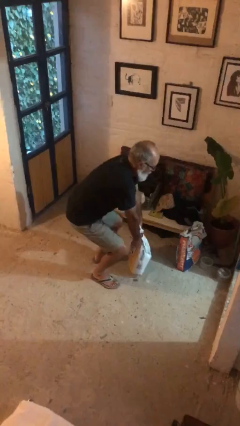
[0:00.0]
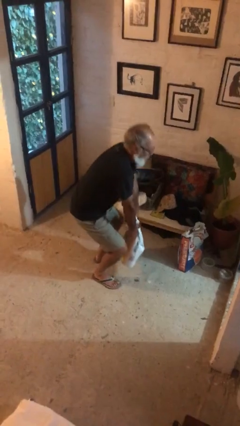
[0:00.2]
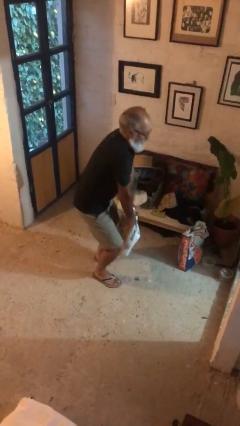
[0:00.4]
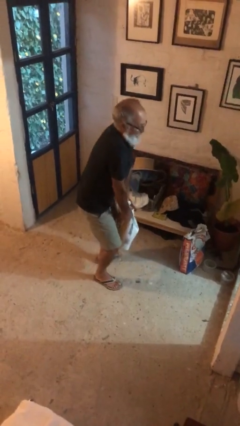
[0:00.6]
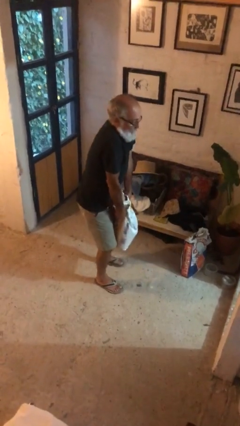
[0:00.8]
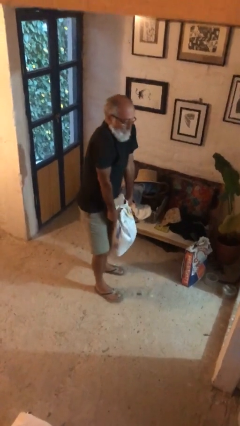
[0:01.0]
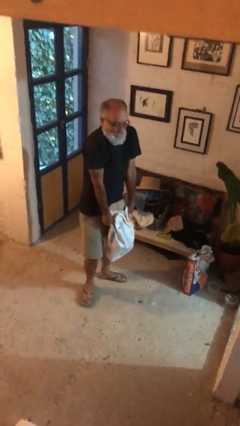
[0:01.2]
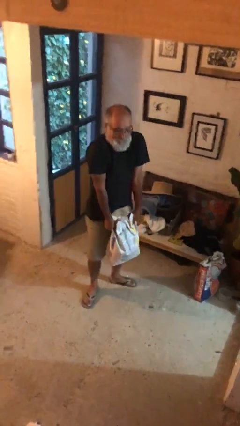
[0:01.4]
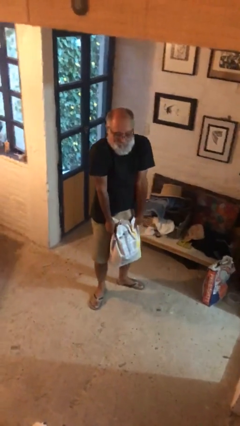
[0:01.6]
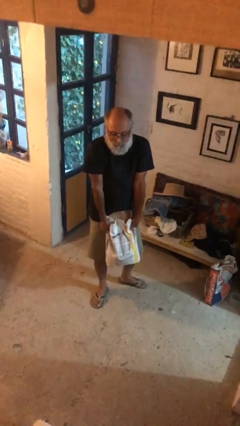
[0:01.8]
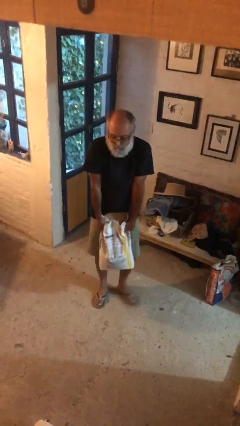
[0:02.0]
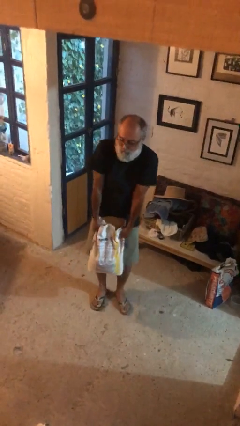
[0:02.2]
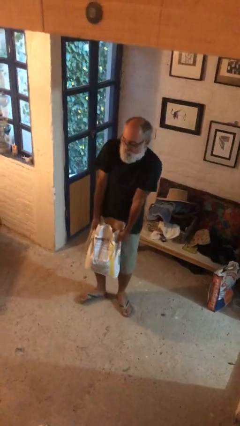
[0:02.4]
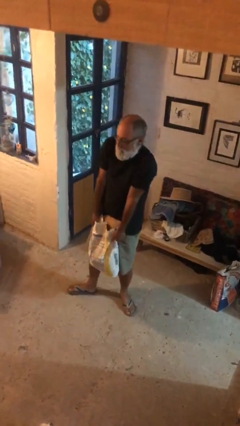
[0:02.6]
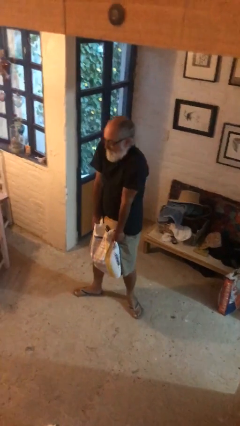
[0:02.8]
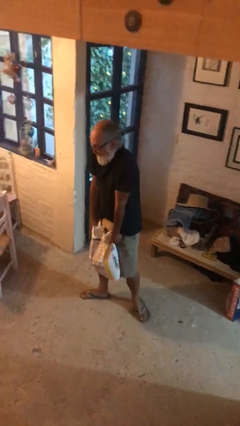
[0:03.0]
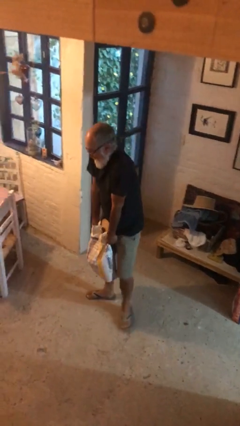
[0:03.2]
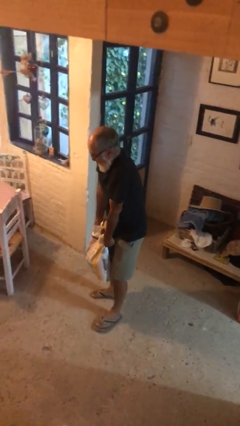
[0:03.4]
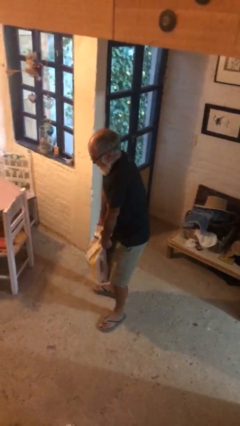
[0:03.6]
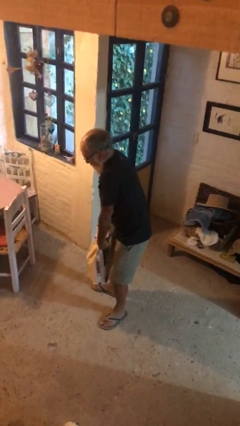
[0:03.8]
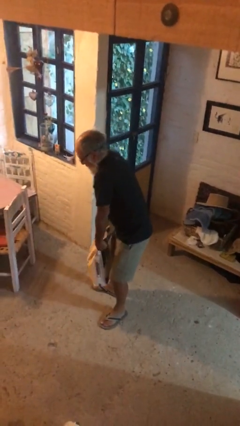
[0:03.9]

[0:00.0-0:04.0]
person carries heavy object

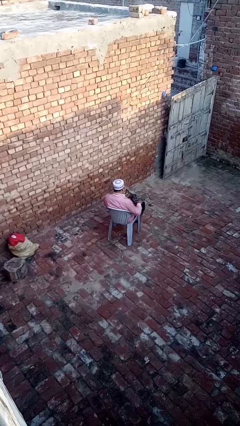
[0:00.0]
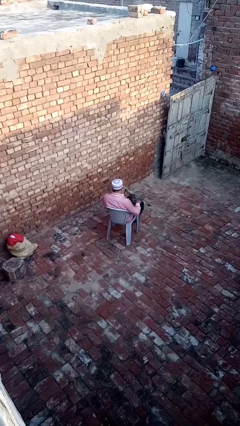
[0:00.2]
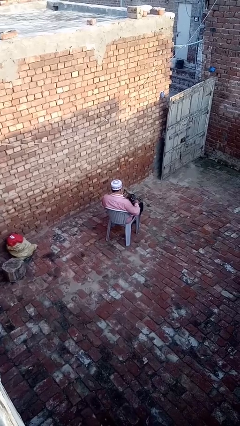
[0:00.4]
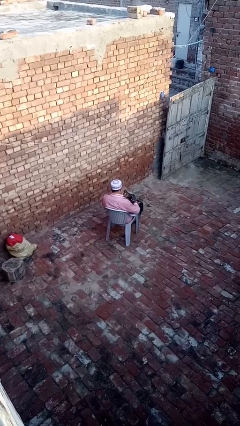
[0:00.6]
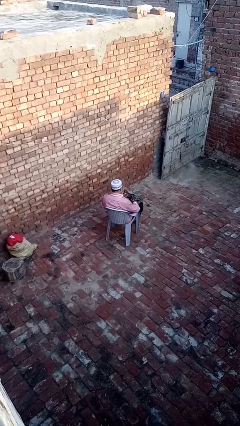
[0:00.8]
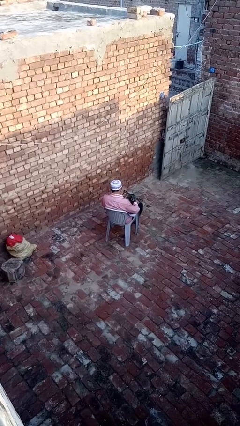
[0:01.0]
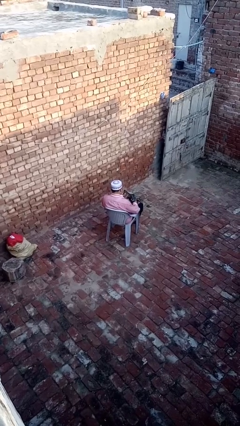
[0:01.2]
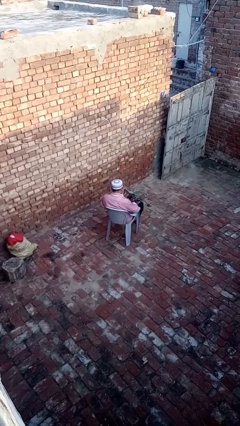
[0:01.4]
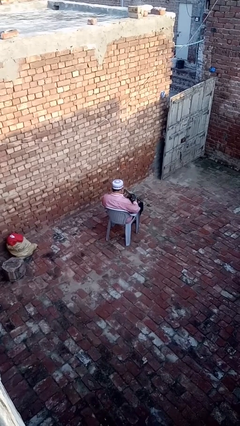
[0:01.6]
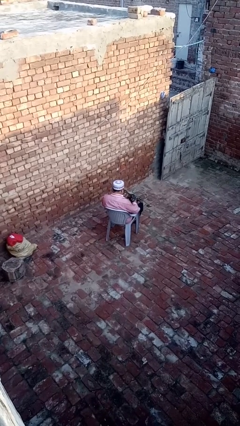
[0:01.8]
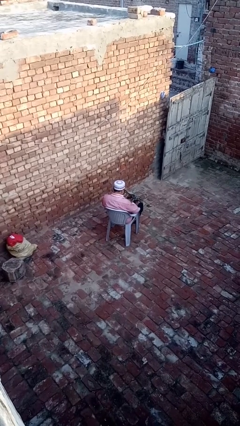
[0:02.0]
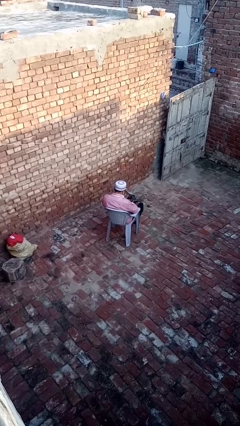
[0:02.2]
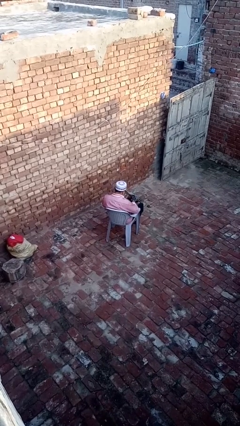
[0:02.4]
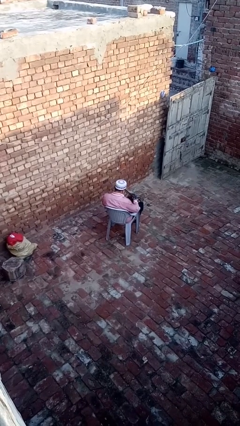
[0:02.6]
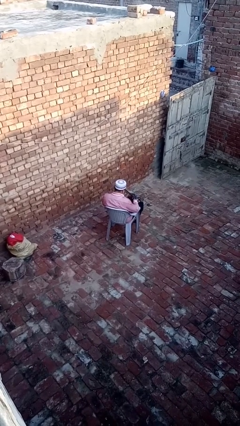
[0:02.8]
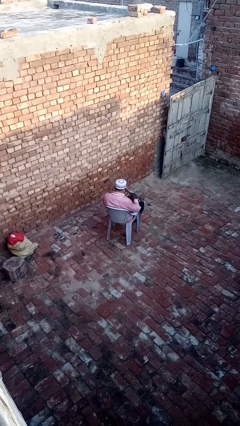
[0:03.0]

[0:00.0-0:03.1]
person searches in purse

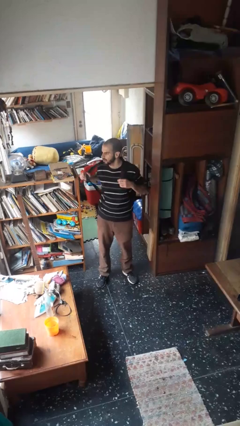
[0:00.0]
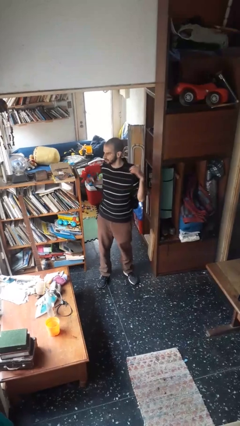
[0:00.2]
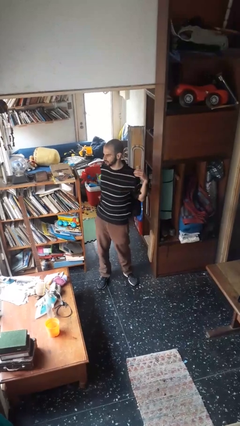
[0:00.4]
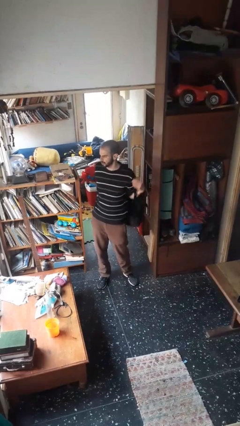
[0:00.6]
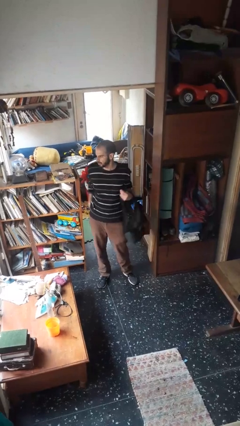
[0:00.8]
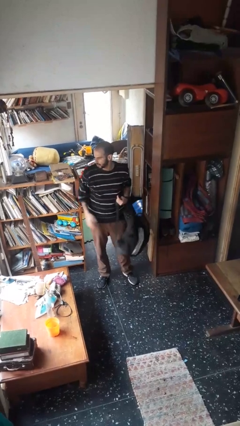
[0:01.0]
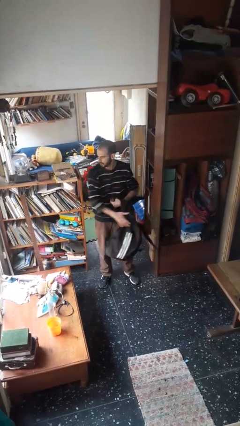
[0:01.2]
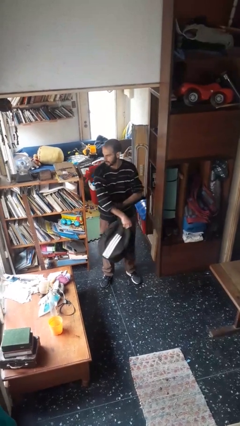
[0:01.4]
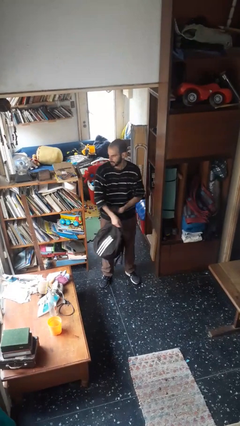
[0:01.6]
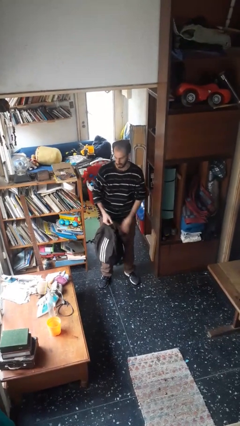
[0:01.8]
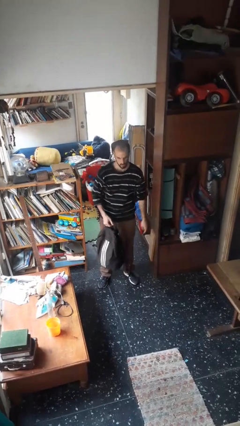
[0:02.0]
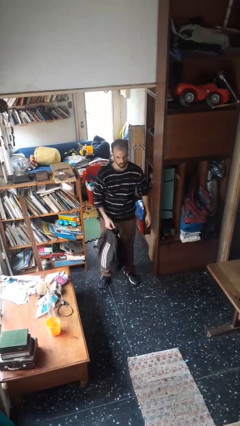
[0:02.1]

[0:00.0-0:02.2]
person takes off backpack

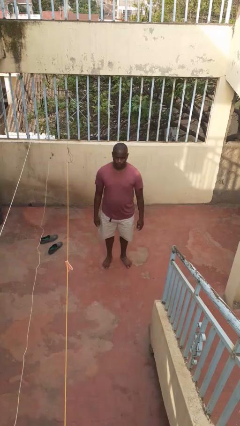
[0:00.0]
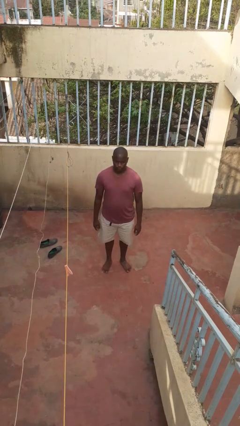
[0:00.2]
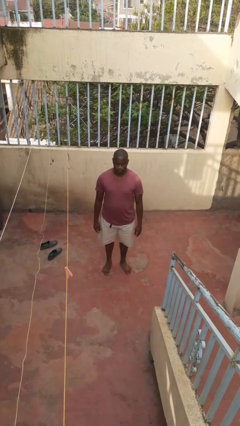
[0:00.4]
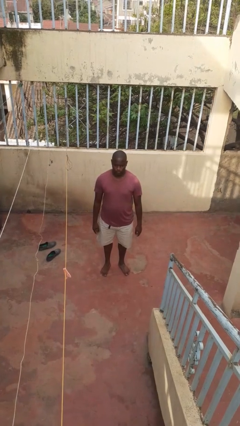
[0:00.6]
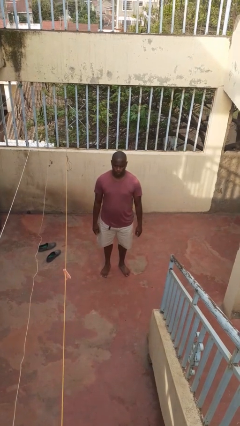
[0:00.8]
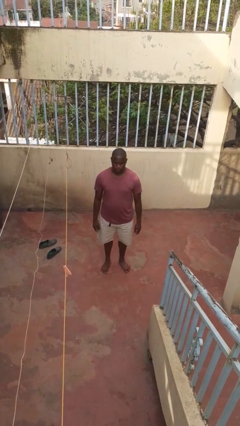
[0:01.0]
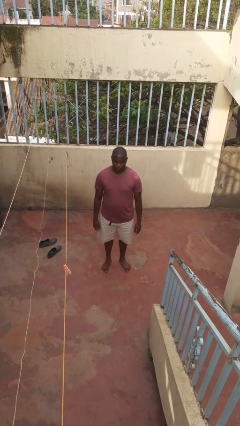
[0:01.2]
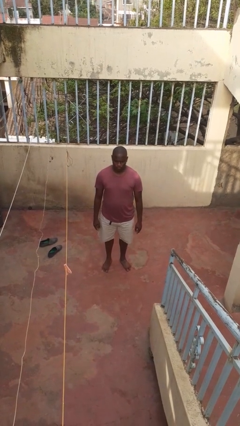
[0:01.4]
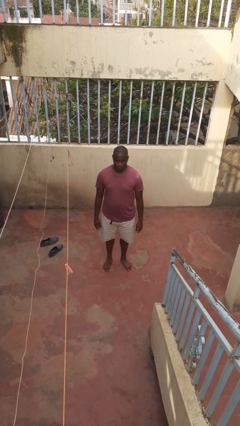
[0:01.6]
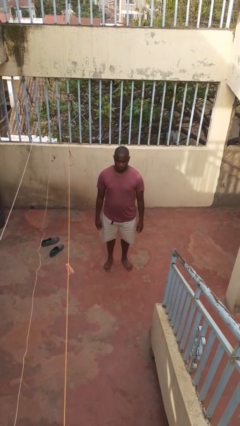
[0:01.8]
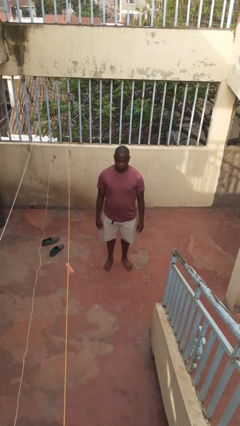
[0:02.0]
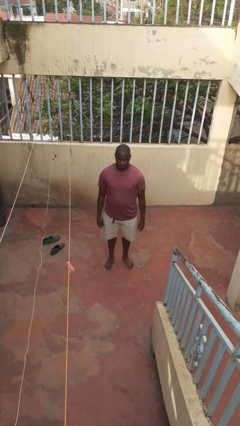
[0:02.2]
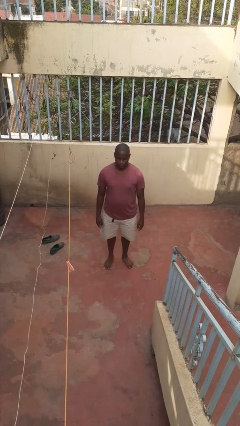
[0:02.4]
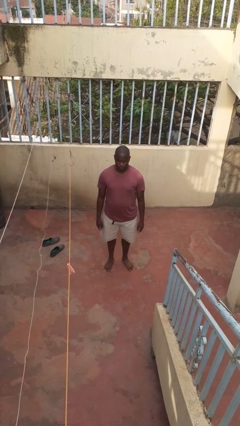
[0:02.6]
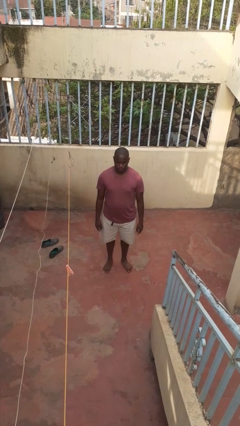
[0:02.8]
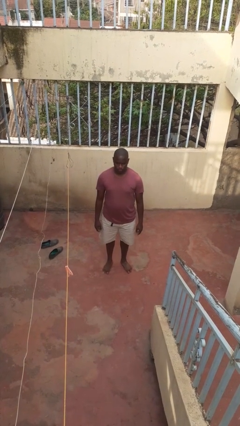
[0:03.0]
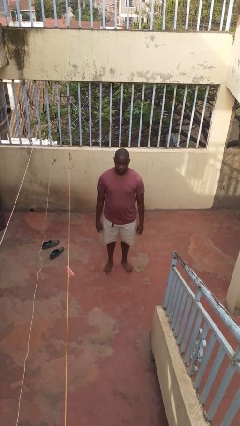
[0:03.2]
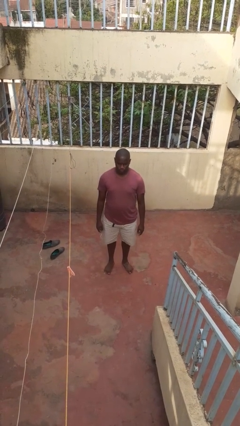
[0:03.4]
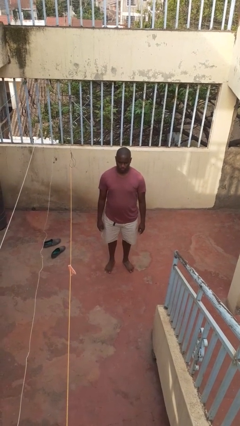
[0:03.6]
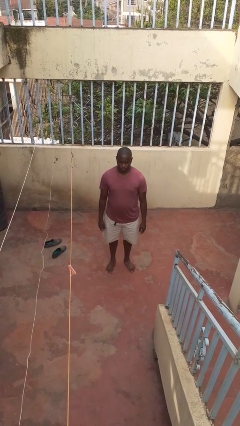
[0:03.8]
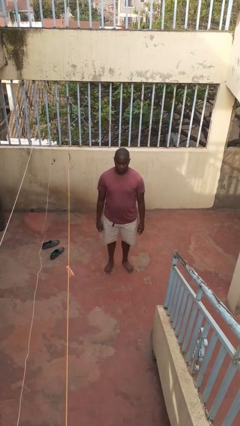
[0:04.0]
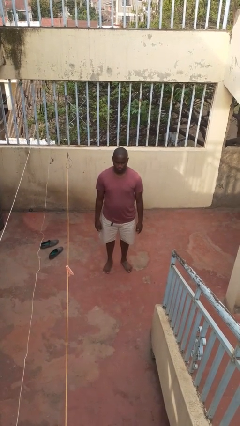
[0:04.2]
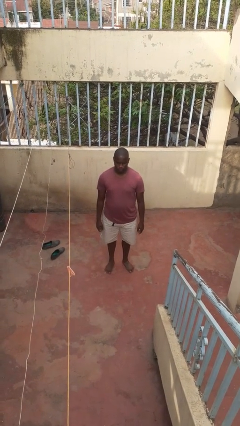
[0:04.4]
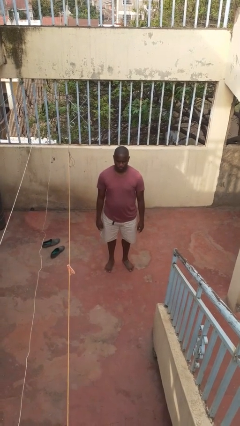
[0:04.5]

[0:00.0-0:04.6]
person stands up from floor

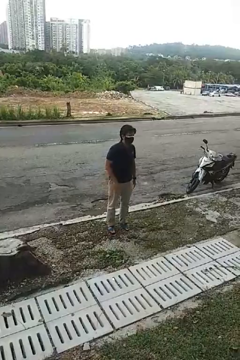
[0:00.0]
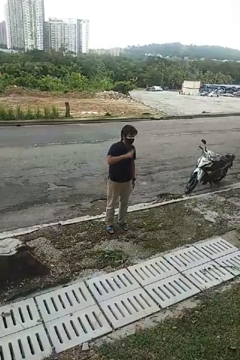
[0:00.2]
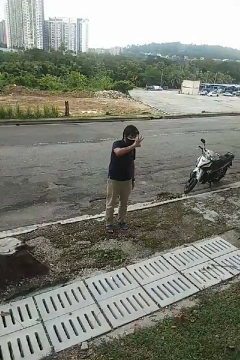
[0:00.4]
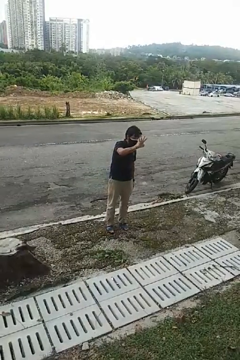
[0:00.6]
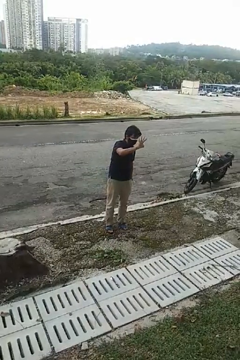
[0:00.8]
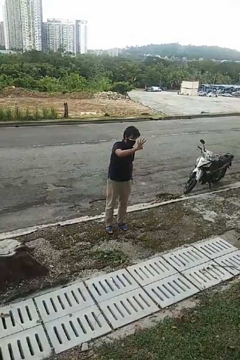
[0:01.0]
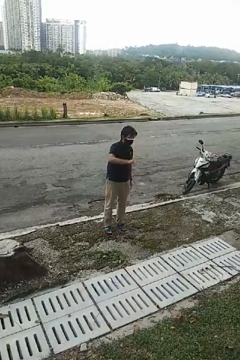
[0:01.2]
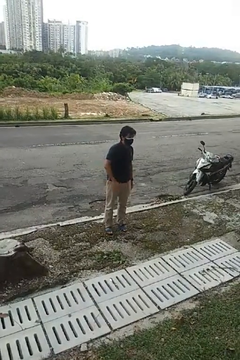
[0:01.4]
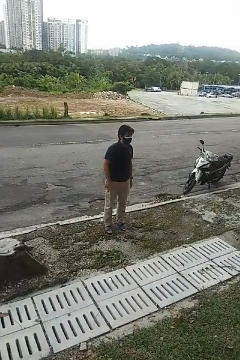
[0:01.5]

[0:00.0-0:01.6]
person gestures number four

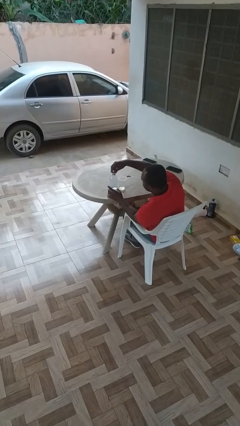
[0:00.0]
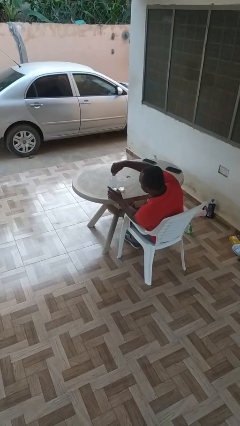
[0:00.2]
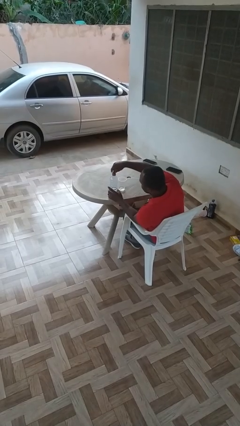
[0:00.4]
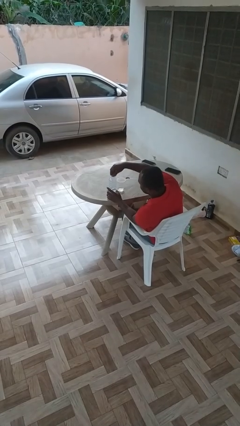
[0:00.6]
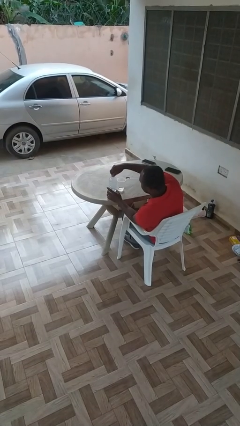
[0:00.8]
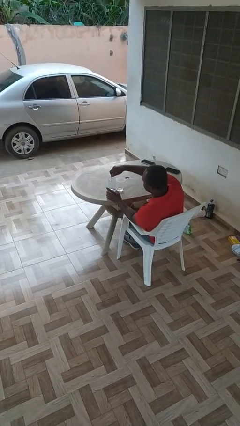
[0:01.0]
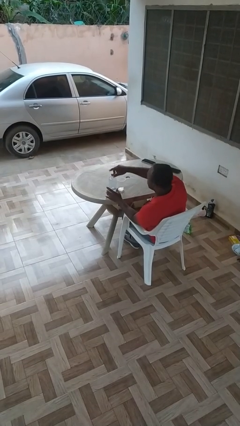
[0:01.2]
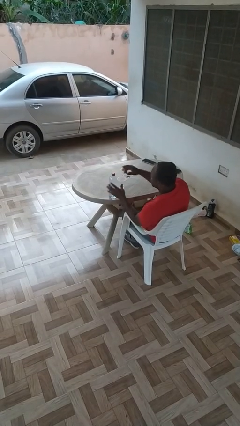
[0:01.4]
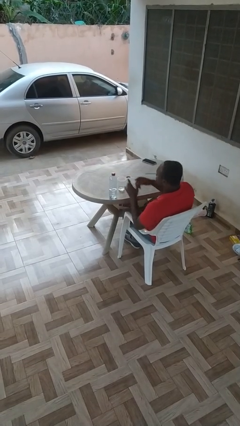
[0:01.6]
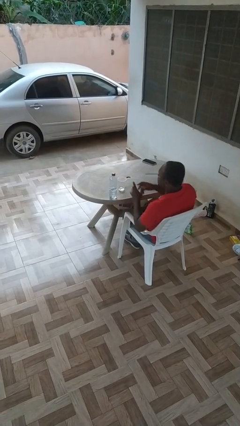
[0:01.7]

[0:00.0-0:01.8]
person screws lid to bottle
